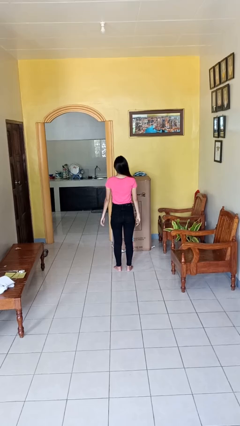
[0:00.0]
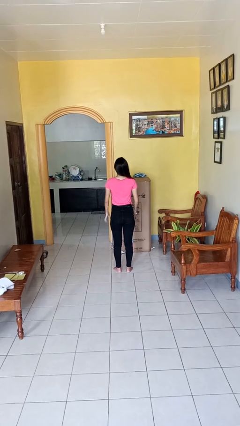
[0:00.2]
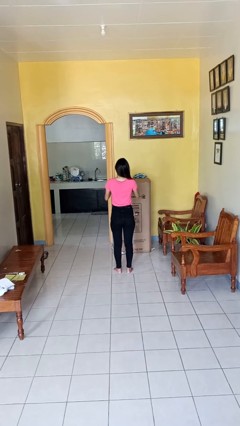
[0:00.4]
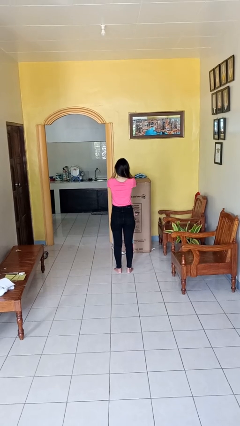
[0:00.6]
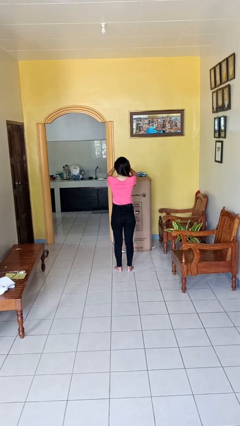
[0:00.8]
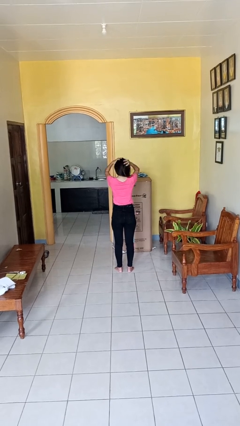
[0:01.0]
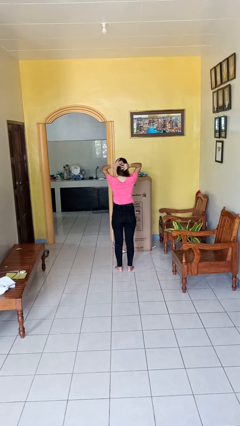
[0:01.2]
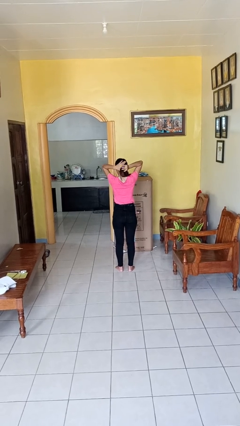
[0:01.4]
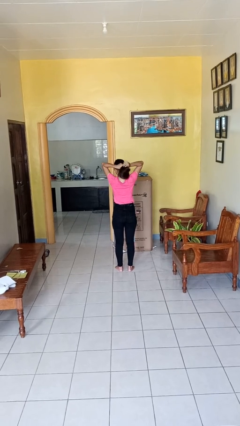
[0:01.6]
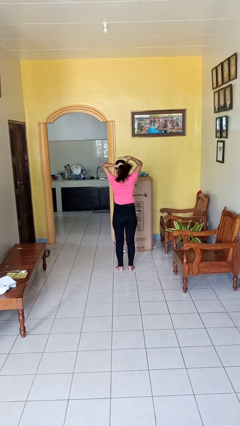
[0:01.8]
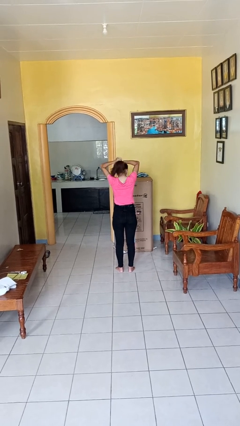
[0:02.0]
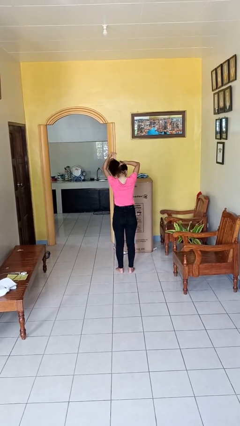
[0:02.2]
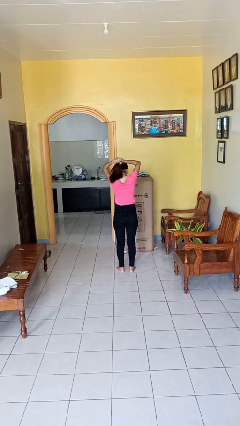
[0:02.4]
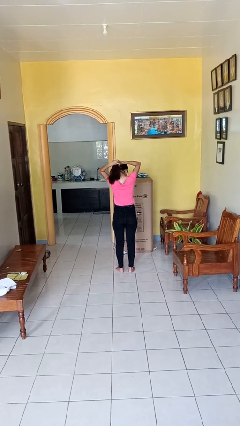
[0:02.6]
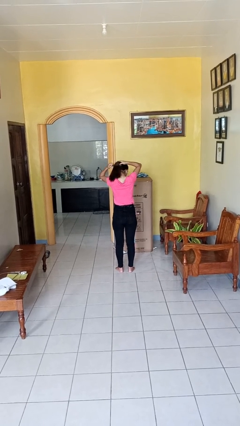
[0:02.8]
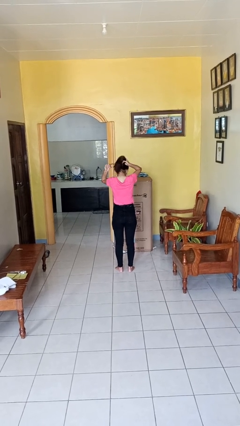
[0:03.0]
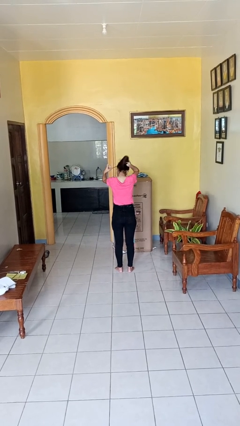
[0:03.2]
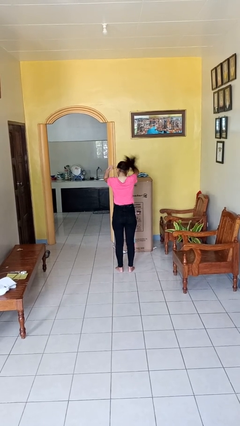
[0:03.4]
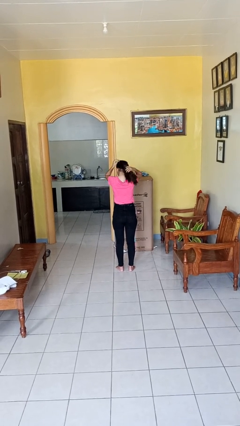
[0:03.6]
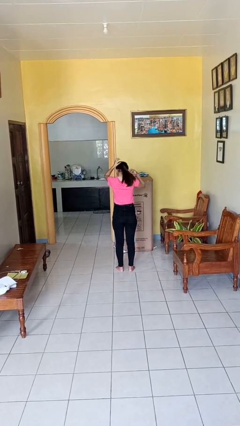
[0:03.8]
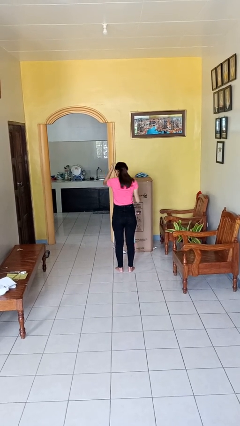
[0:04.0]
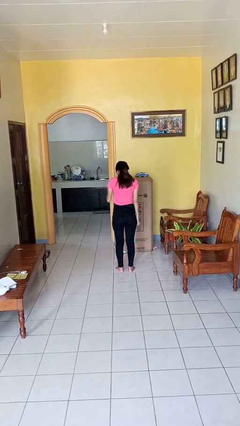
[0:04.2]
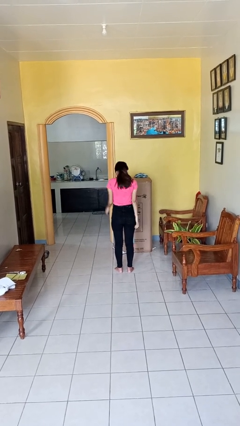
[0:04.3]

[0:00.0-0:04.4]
person puts hair in ponytail

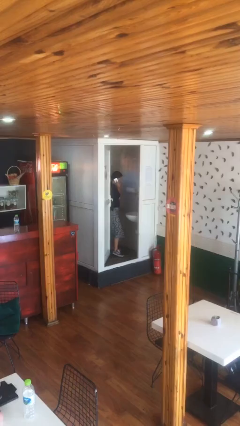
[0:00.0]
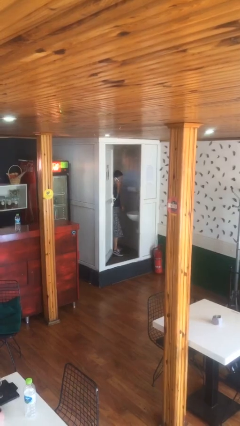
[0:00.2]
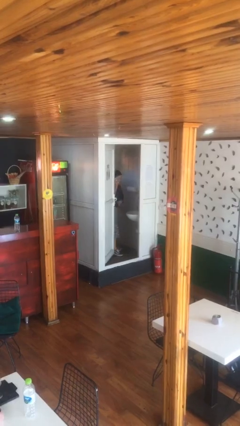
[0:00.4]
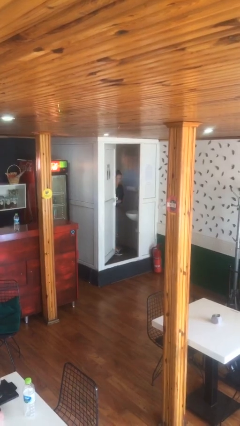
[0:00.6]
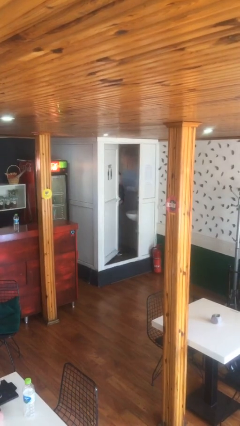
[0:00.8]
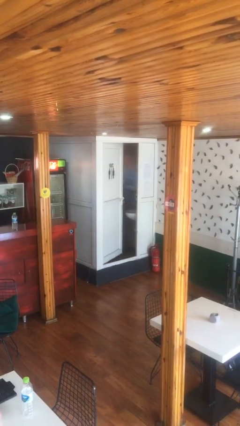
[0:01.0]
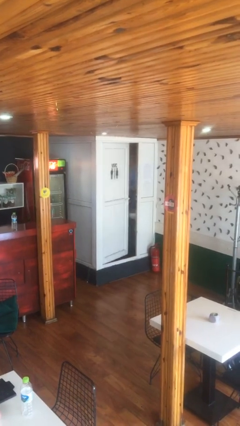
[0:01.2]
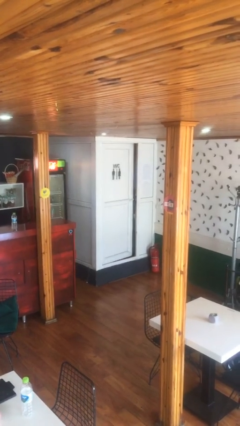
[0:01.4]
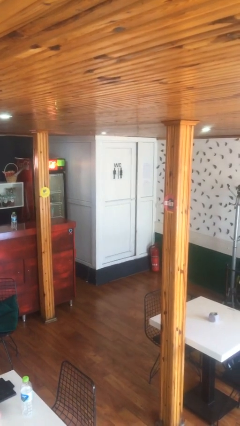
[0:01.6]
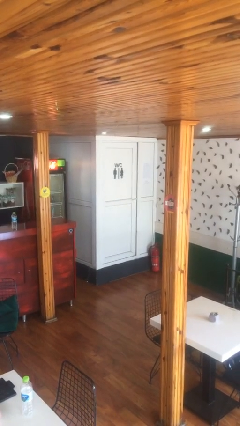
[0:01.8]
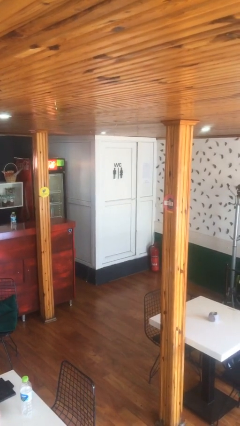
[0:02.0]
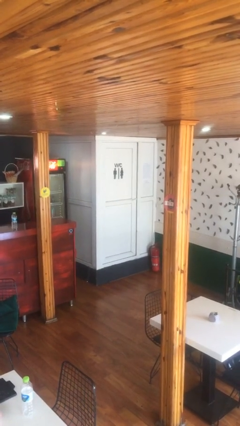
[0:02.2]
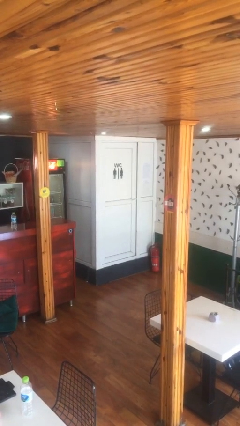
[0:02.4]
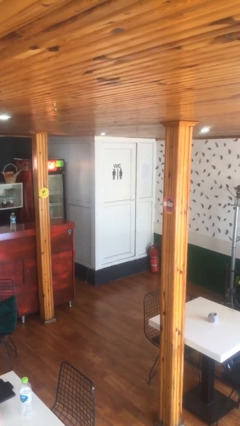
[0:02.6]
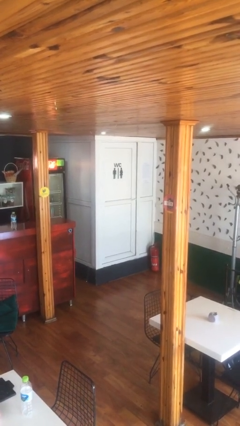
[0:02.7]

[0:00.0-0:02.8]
person closes facility door

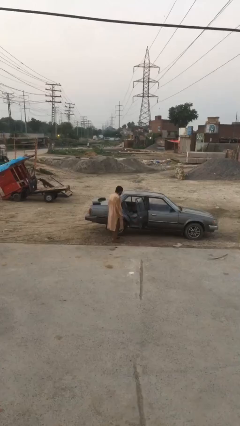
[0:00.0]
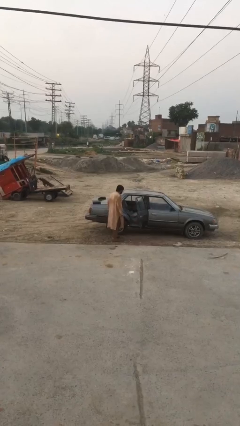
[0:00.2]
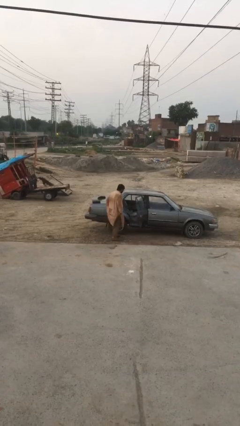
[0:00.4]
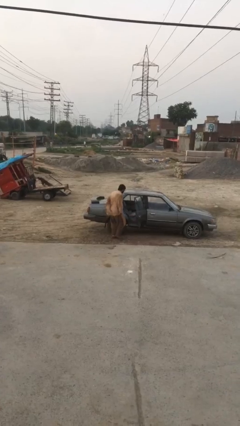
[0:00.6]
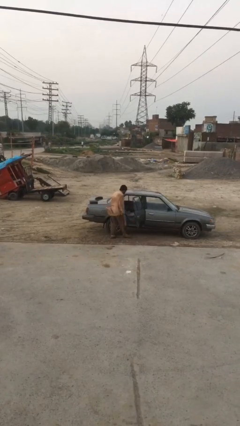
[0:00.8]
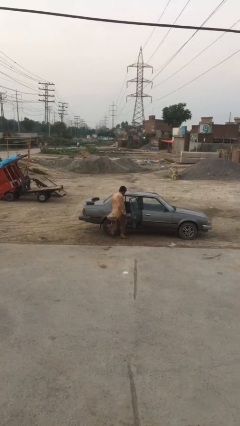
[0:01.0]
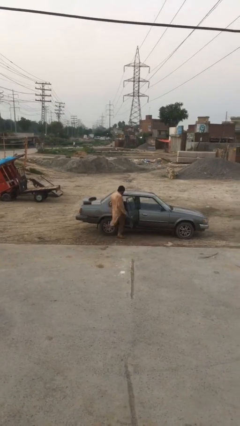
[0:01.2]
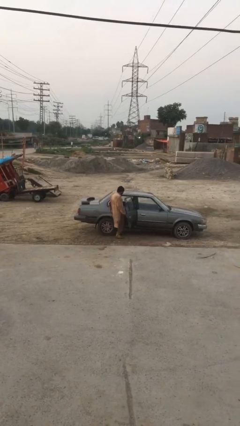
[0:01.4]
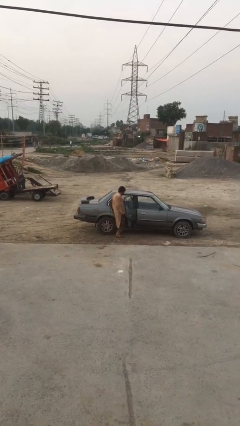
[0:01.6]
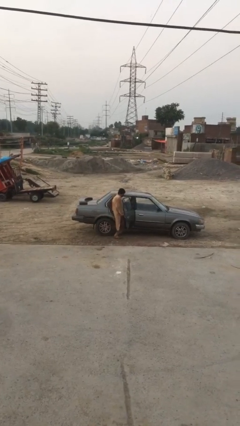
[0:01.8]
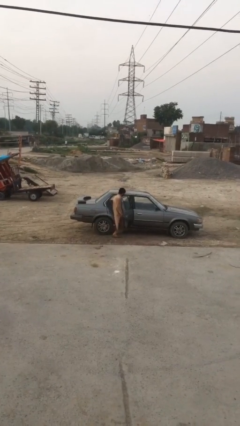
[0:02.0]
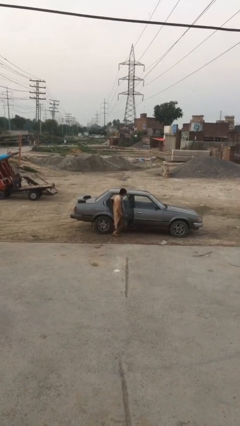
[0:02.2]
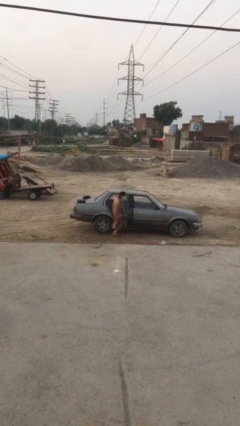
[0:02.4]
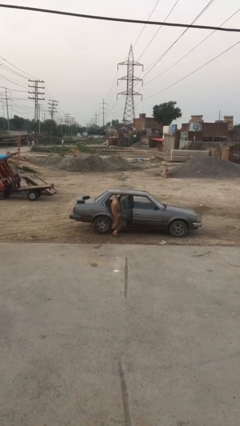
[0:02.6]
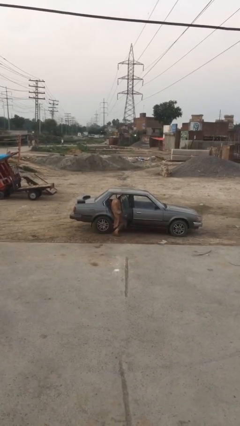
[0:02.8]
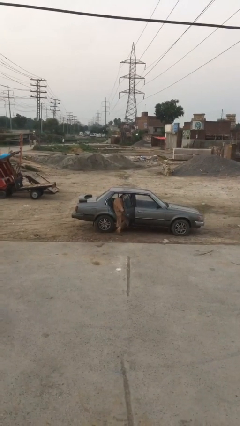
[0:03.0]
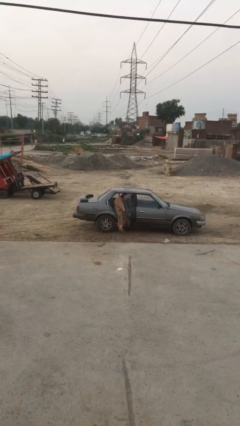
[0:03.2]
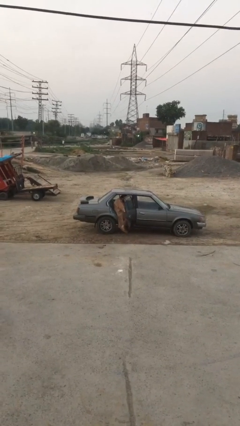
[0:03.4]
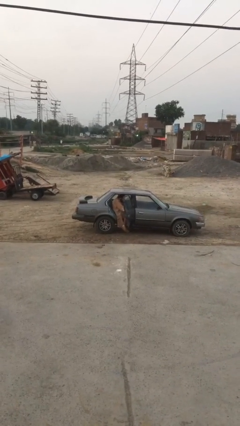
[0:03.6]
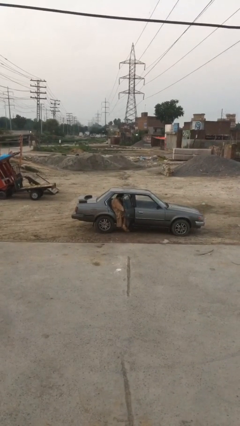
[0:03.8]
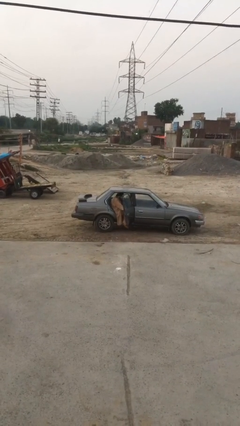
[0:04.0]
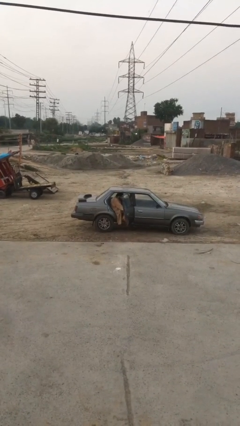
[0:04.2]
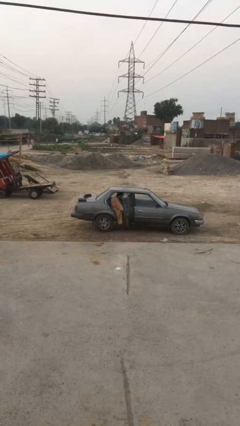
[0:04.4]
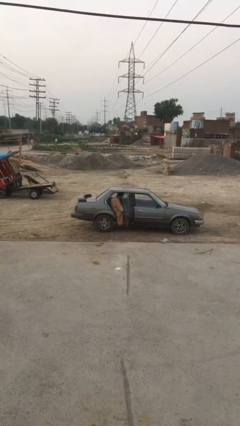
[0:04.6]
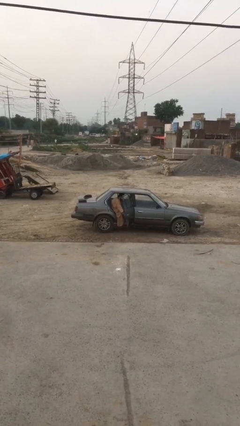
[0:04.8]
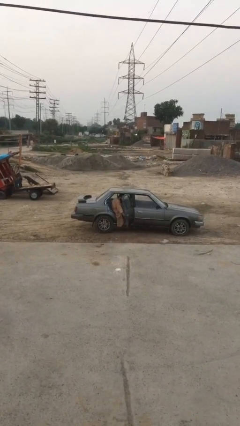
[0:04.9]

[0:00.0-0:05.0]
person enters car

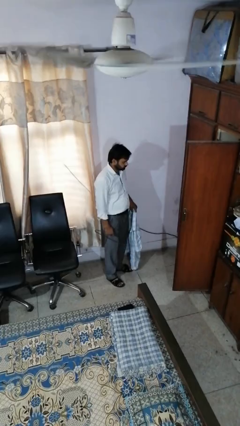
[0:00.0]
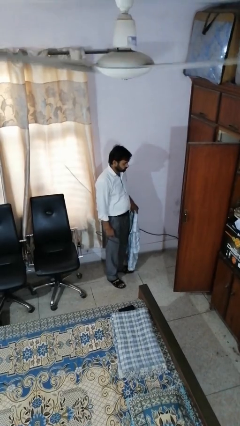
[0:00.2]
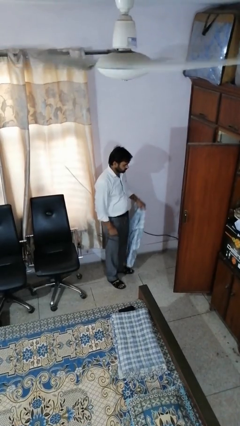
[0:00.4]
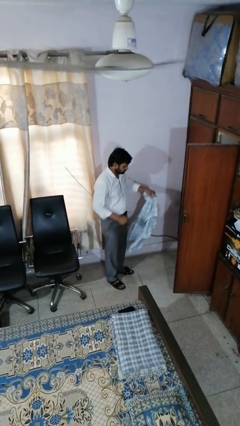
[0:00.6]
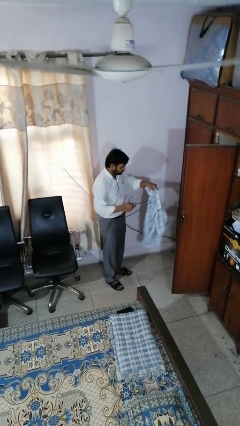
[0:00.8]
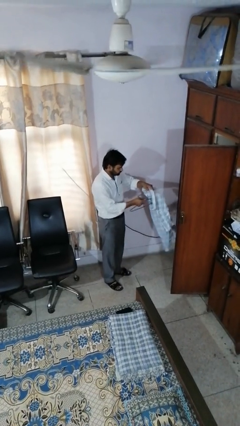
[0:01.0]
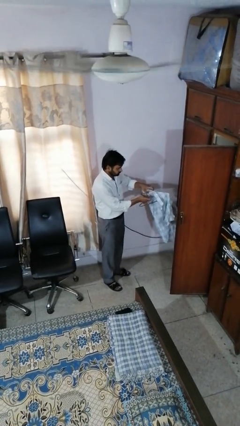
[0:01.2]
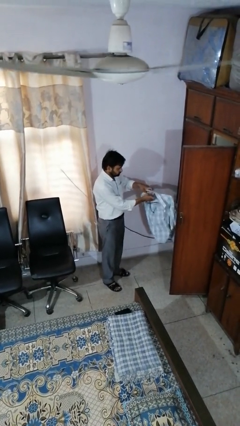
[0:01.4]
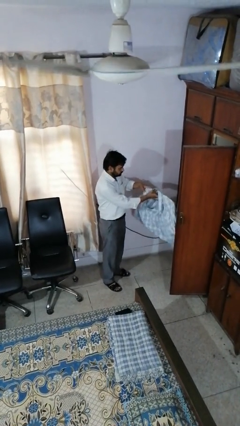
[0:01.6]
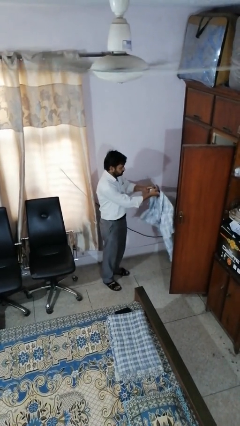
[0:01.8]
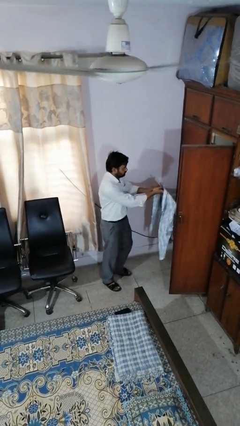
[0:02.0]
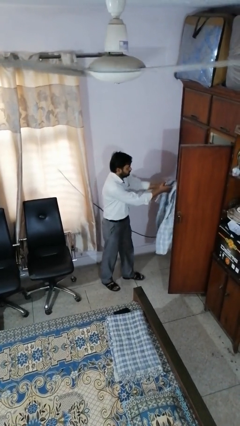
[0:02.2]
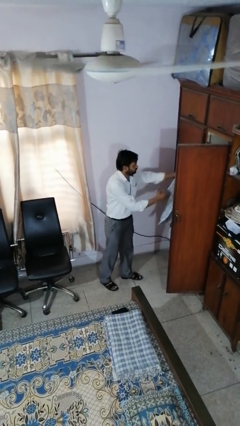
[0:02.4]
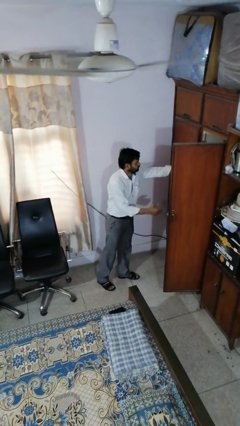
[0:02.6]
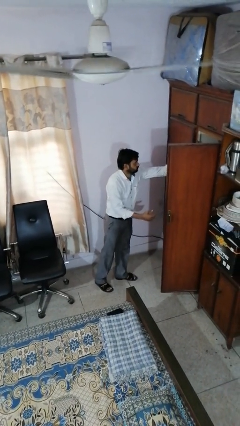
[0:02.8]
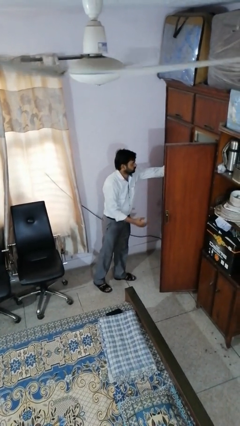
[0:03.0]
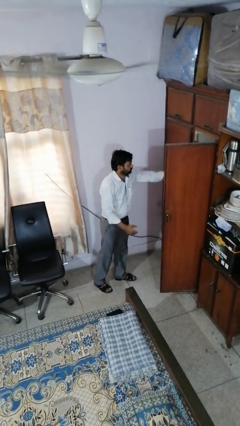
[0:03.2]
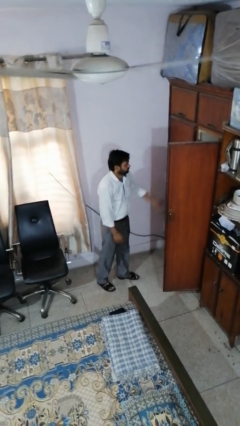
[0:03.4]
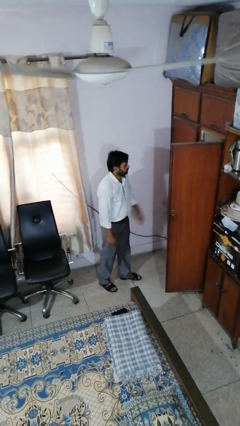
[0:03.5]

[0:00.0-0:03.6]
person puts clothes into closet

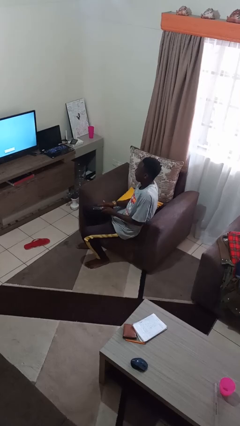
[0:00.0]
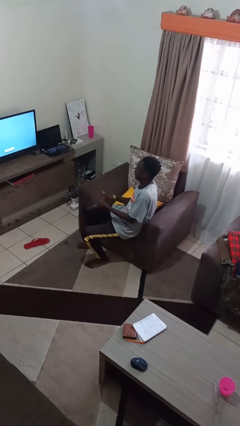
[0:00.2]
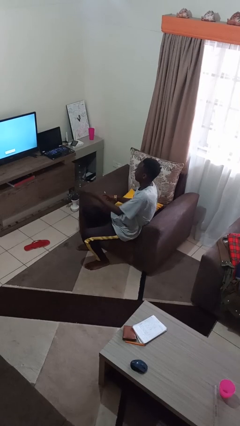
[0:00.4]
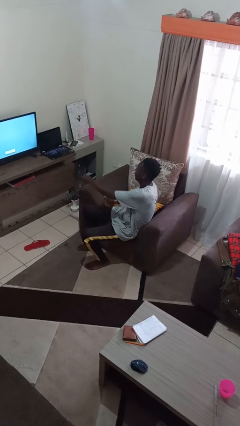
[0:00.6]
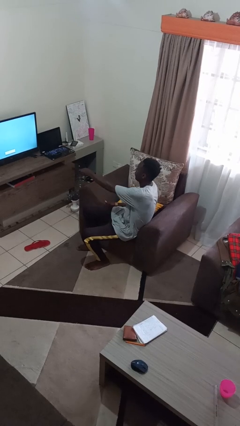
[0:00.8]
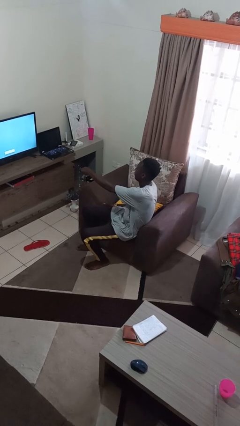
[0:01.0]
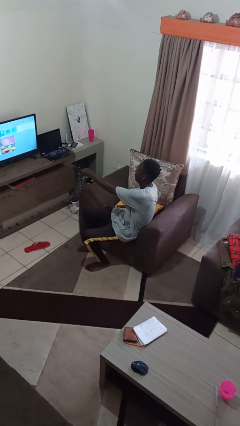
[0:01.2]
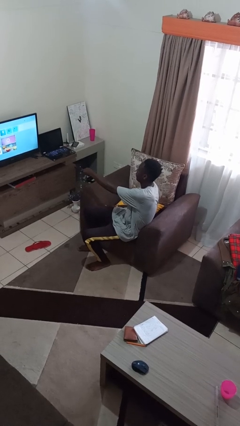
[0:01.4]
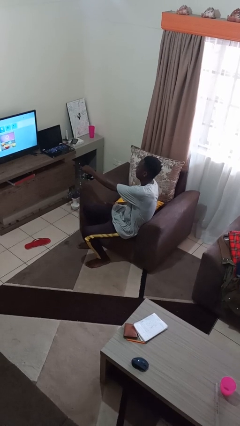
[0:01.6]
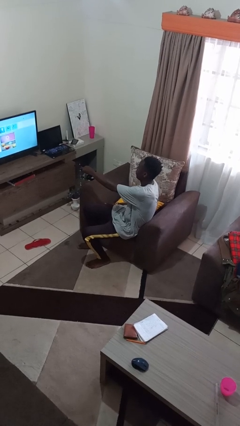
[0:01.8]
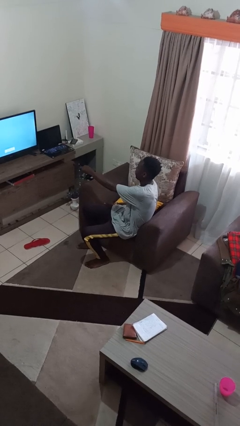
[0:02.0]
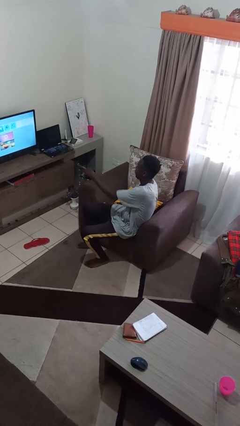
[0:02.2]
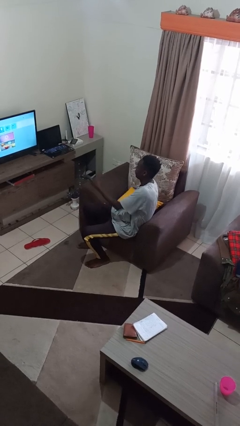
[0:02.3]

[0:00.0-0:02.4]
person uses television remote
